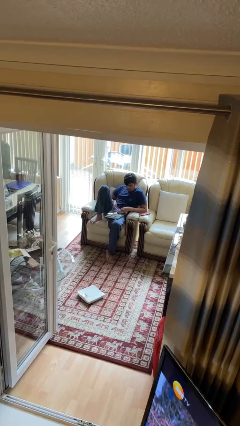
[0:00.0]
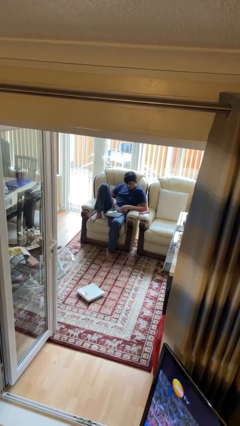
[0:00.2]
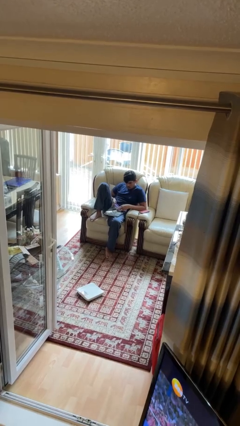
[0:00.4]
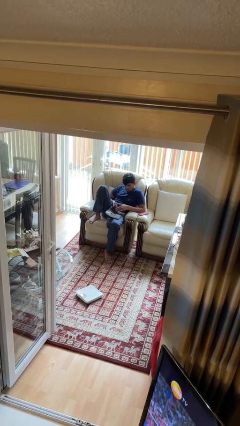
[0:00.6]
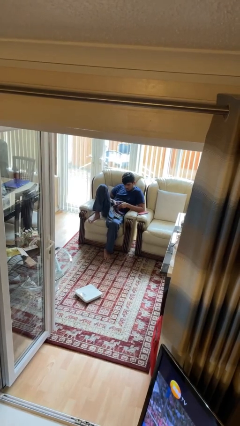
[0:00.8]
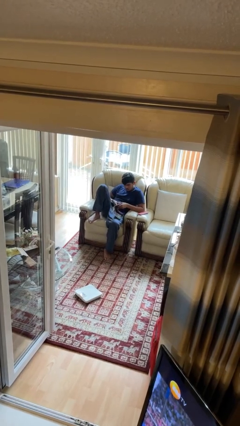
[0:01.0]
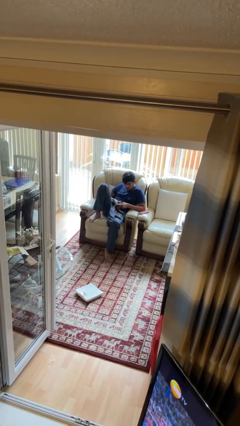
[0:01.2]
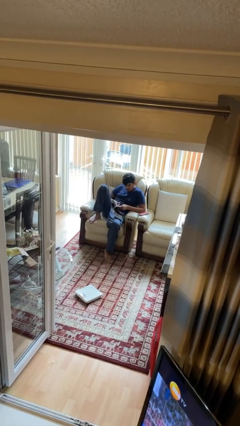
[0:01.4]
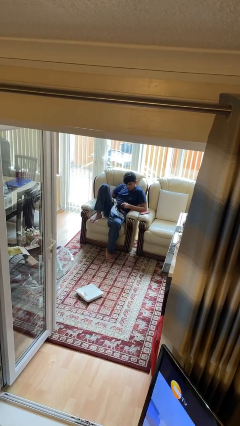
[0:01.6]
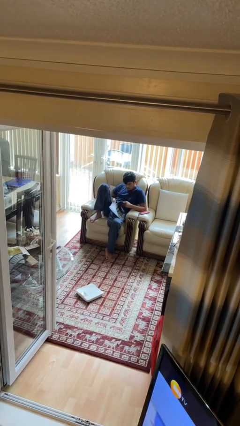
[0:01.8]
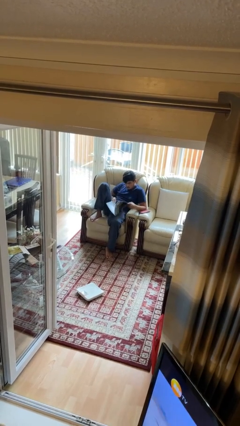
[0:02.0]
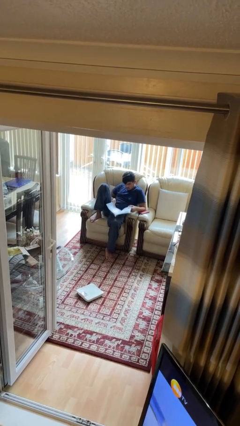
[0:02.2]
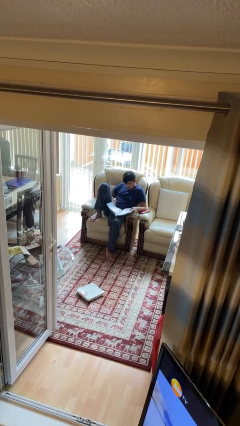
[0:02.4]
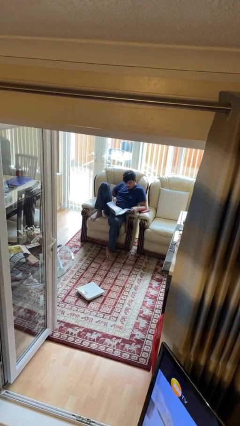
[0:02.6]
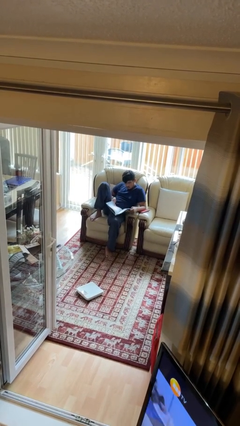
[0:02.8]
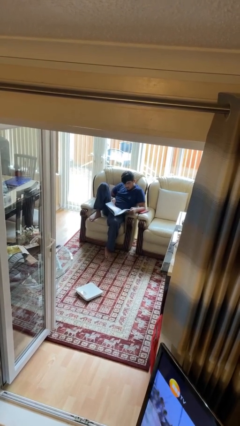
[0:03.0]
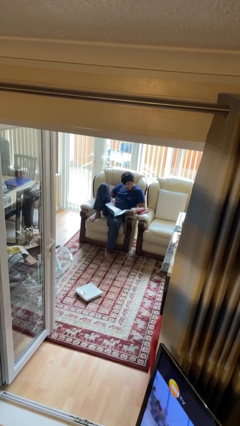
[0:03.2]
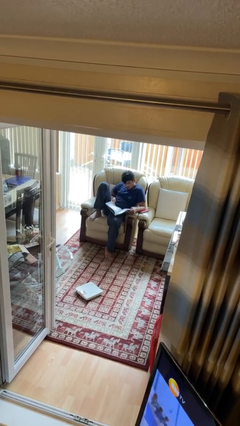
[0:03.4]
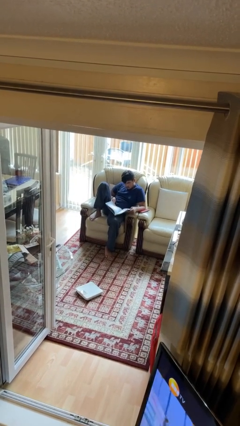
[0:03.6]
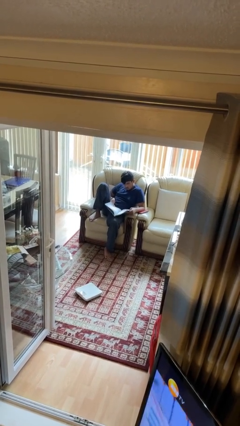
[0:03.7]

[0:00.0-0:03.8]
person reads magazine

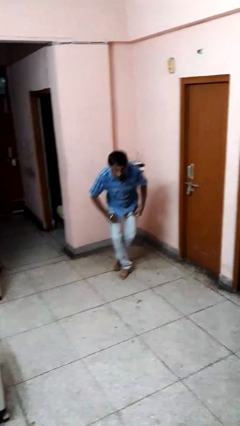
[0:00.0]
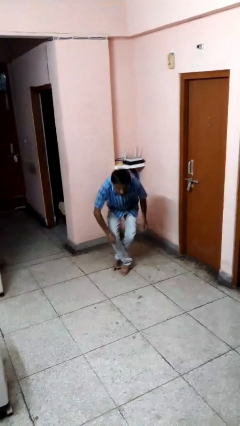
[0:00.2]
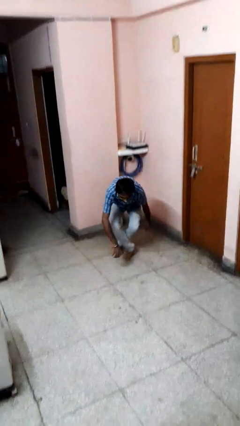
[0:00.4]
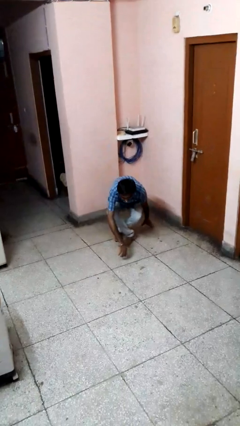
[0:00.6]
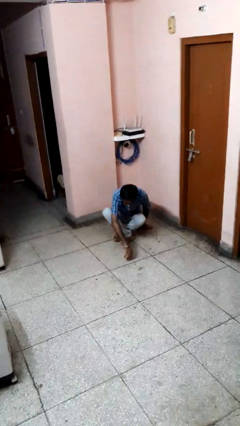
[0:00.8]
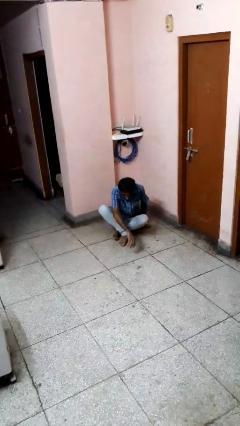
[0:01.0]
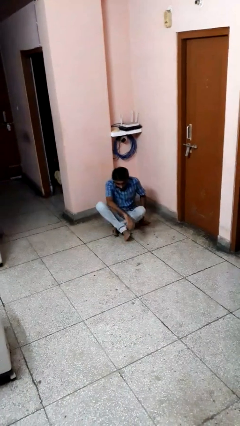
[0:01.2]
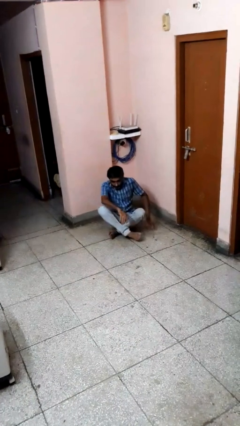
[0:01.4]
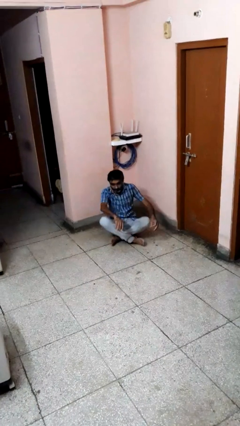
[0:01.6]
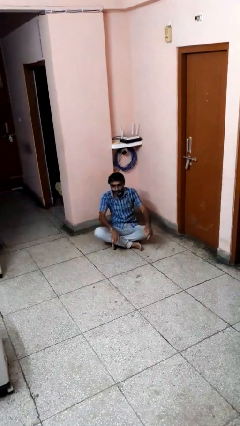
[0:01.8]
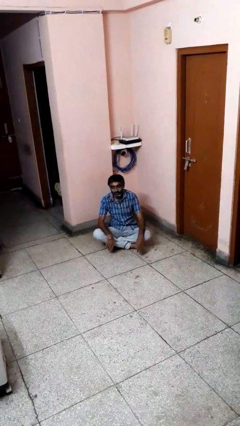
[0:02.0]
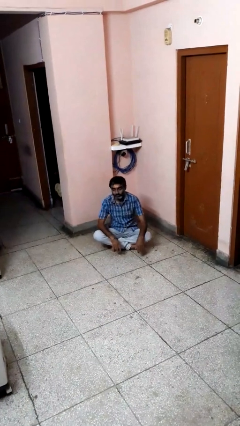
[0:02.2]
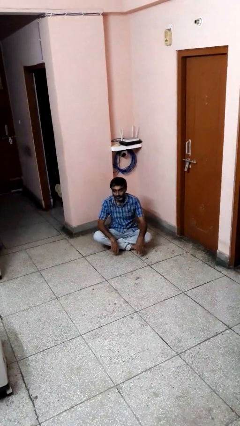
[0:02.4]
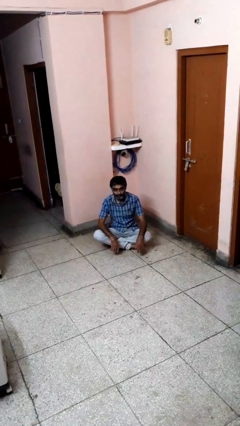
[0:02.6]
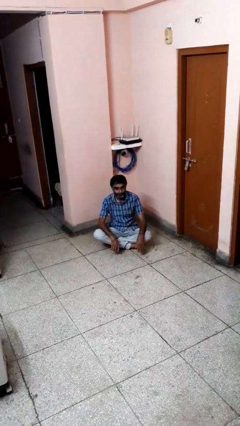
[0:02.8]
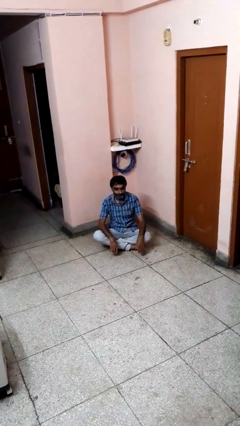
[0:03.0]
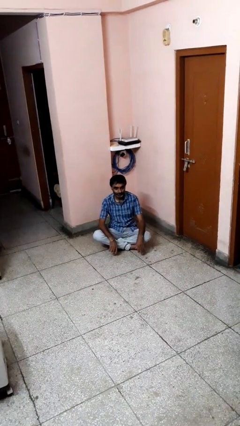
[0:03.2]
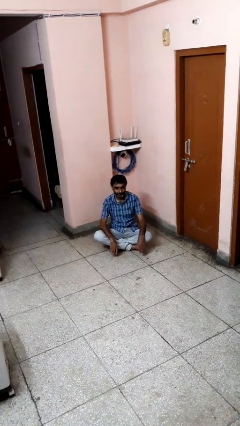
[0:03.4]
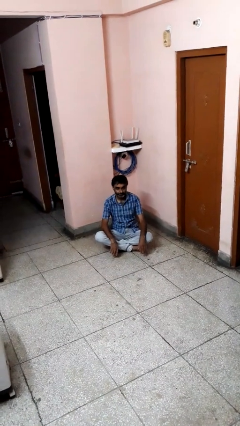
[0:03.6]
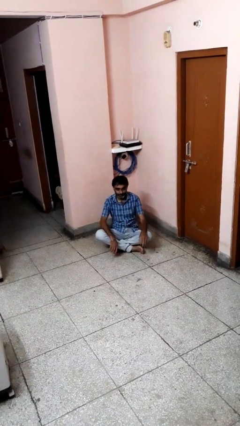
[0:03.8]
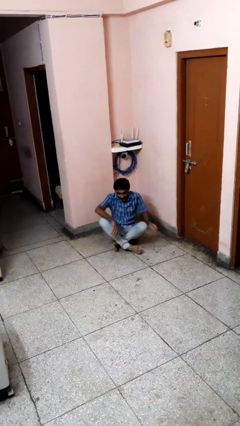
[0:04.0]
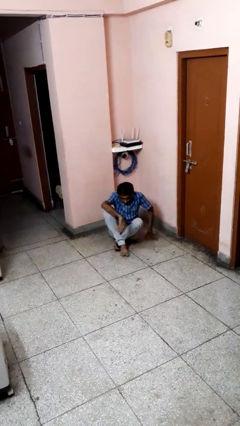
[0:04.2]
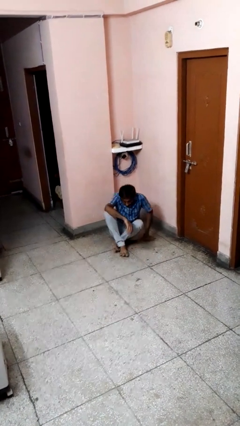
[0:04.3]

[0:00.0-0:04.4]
person sits crisscross

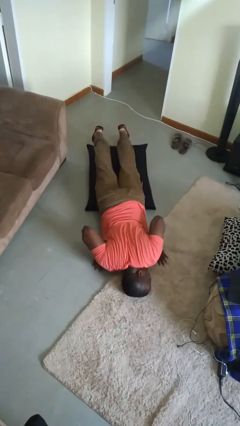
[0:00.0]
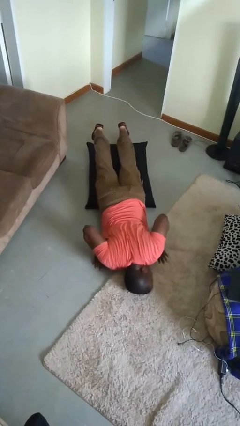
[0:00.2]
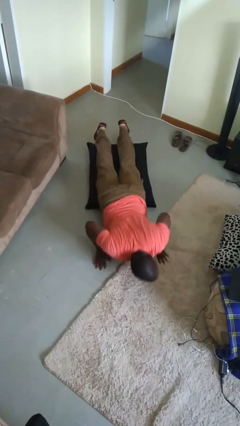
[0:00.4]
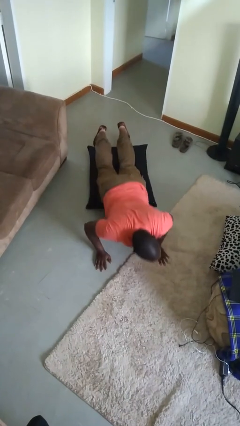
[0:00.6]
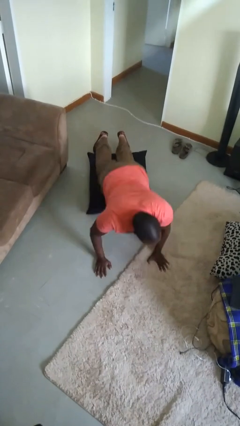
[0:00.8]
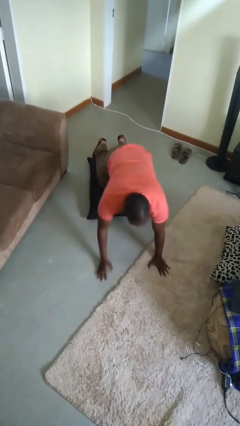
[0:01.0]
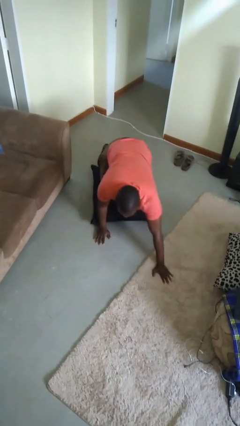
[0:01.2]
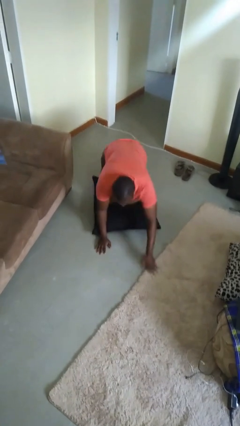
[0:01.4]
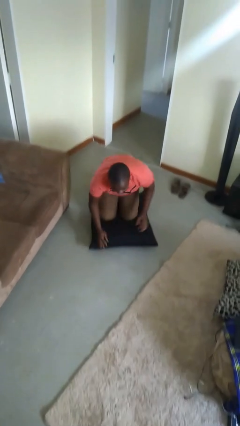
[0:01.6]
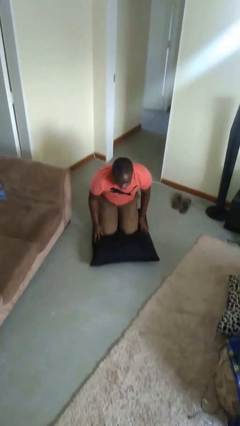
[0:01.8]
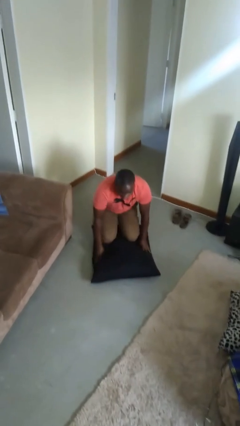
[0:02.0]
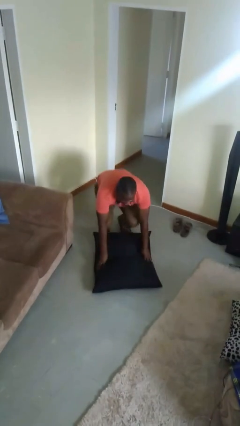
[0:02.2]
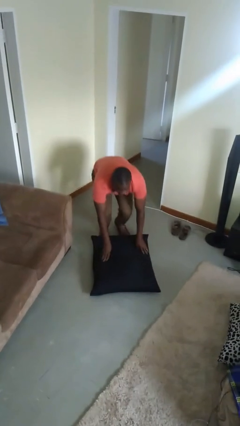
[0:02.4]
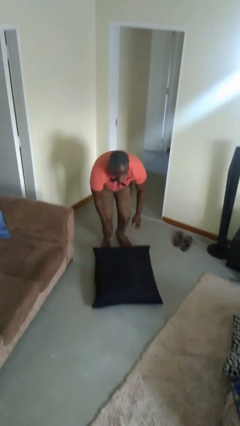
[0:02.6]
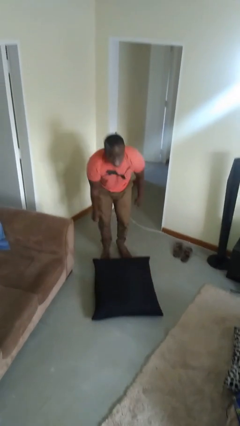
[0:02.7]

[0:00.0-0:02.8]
person stands up from floor

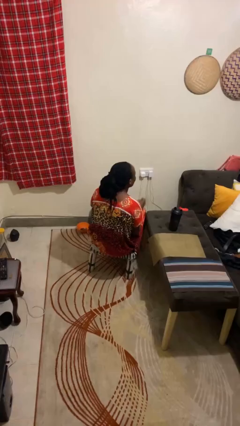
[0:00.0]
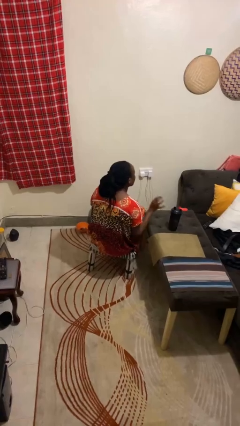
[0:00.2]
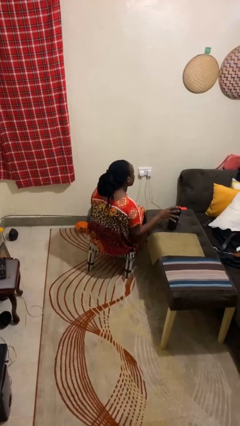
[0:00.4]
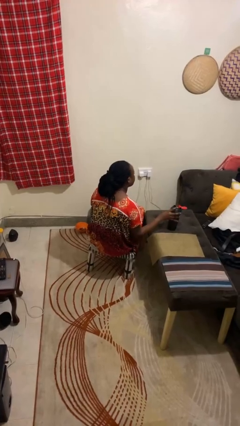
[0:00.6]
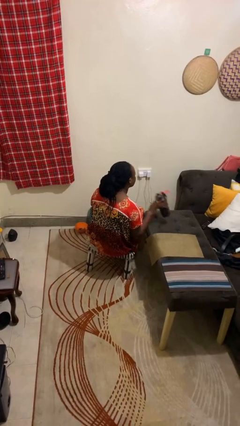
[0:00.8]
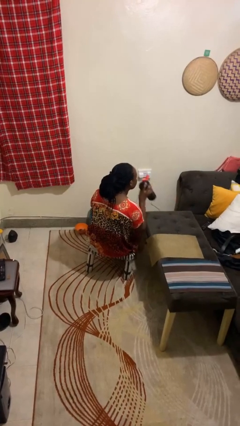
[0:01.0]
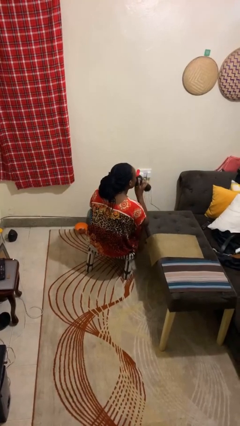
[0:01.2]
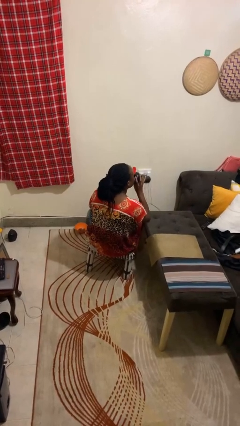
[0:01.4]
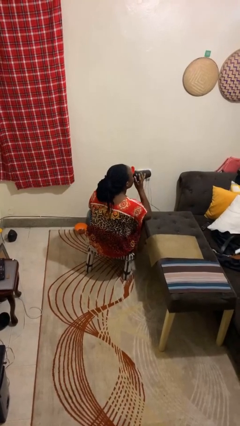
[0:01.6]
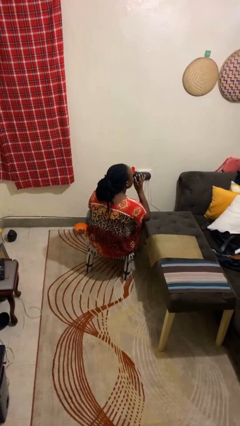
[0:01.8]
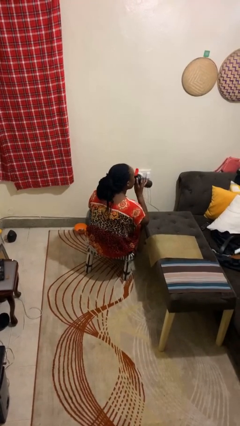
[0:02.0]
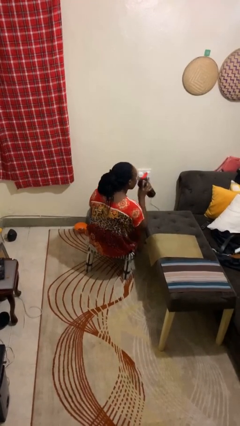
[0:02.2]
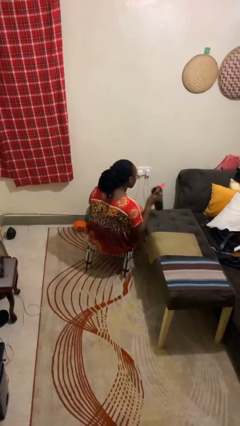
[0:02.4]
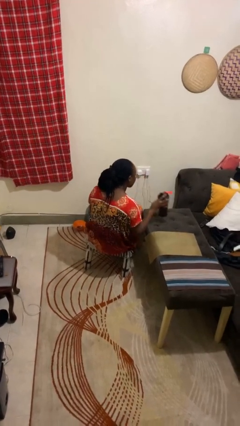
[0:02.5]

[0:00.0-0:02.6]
person drinks from cup

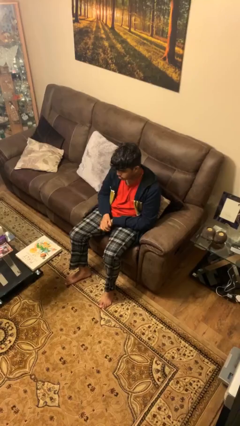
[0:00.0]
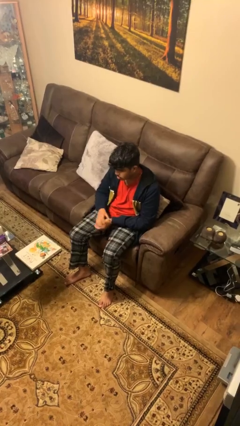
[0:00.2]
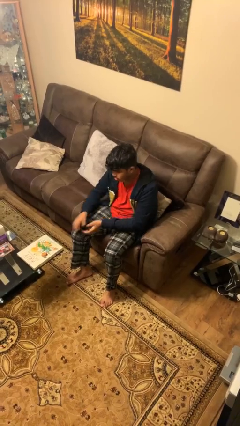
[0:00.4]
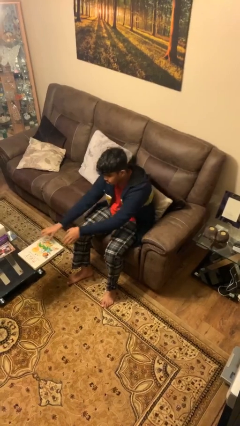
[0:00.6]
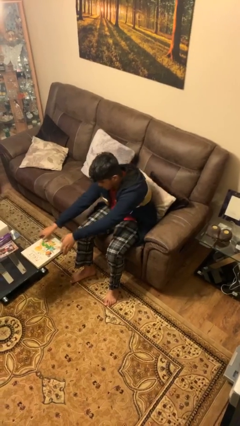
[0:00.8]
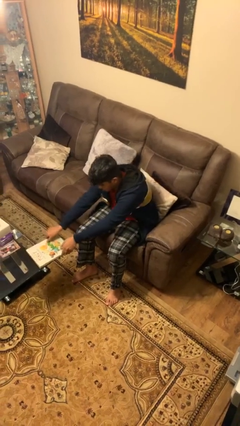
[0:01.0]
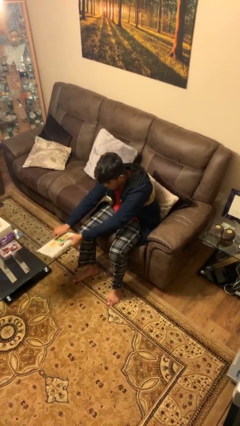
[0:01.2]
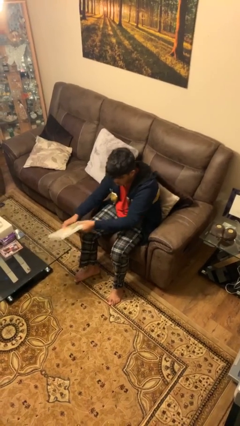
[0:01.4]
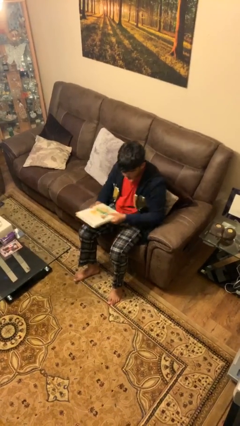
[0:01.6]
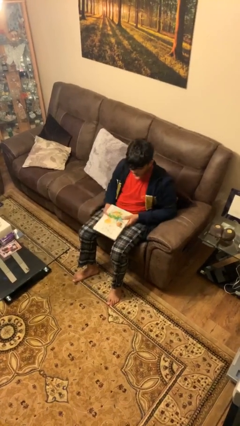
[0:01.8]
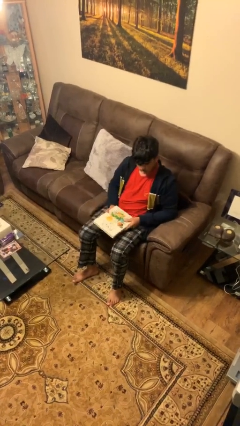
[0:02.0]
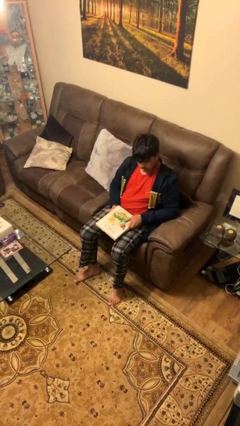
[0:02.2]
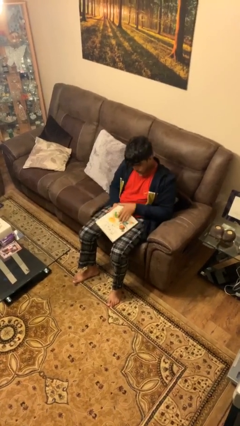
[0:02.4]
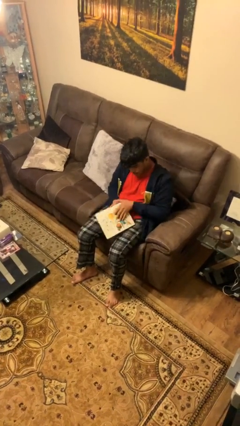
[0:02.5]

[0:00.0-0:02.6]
person picks up object from table

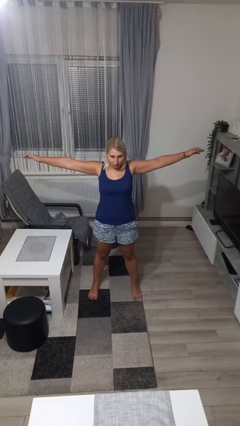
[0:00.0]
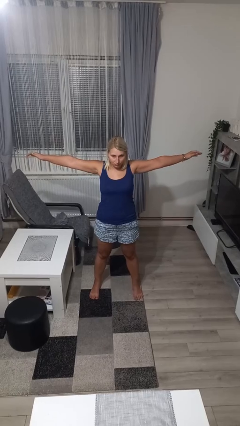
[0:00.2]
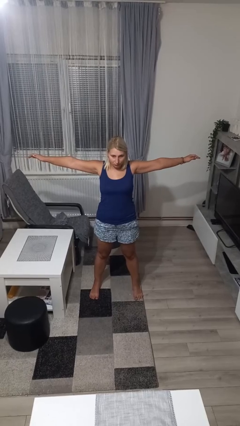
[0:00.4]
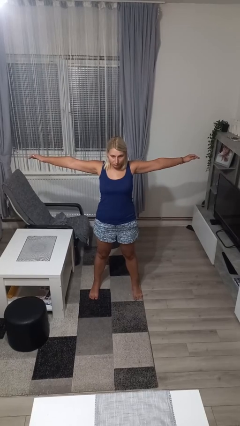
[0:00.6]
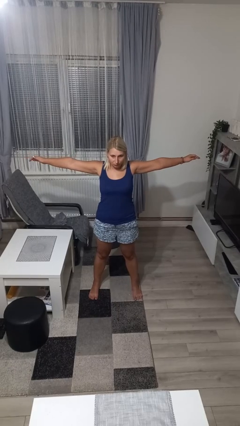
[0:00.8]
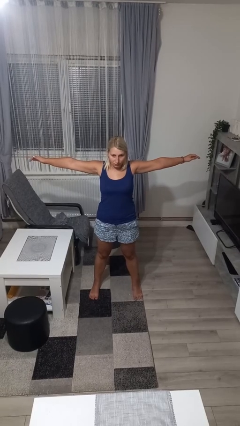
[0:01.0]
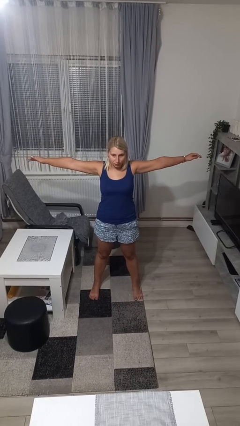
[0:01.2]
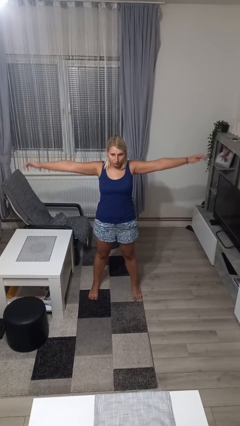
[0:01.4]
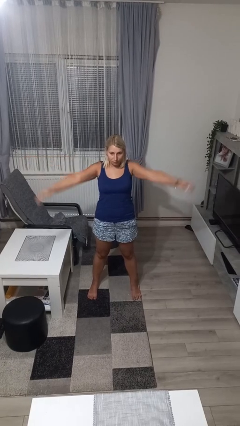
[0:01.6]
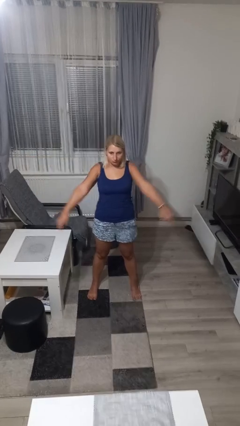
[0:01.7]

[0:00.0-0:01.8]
person stretches arms to side
